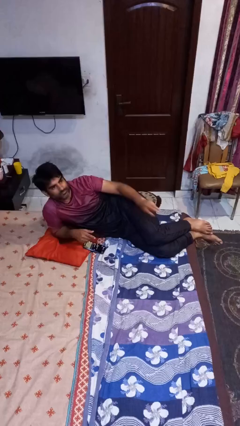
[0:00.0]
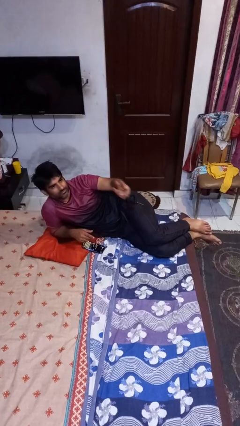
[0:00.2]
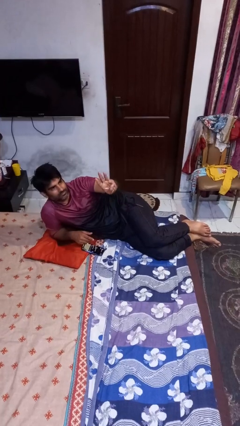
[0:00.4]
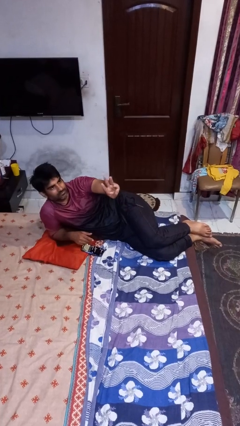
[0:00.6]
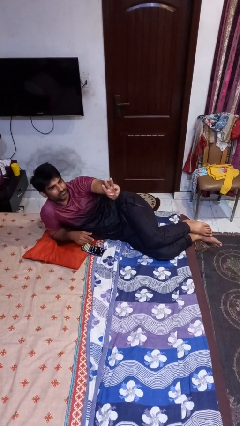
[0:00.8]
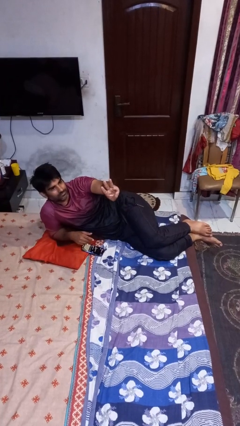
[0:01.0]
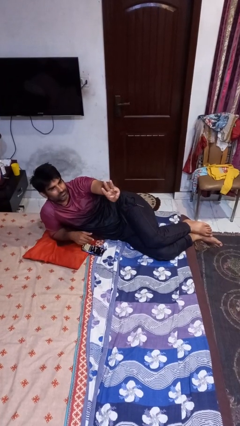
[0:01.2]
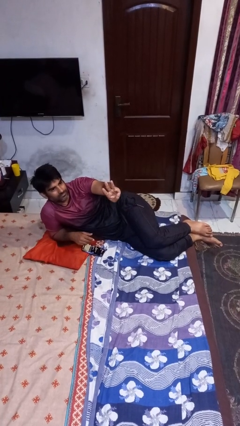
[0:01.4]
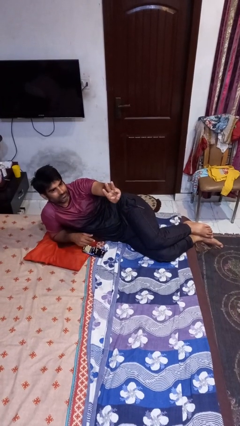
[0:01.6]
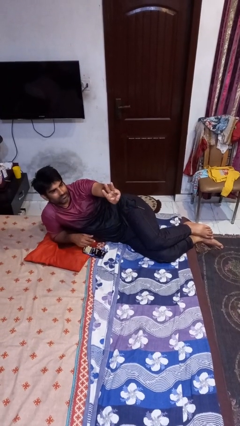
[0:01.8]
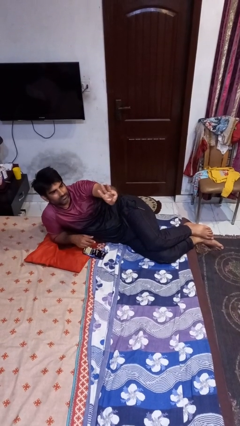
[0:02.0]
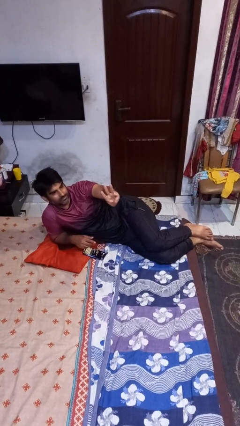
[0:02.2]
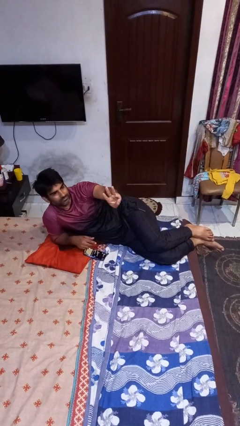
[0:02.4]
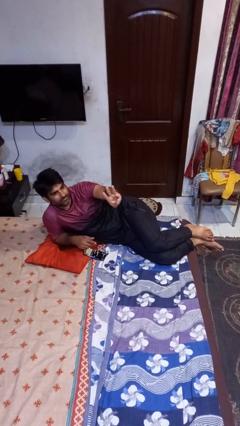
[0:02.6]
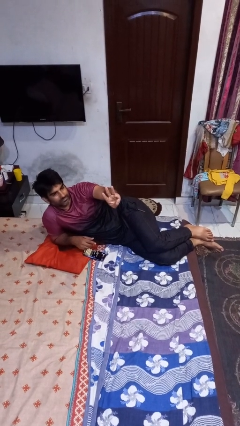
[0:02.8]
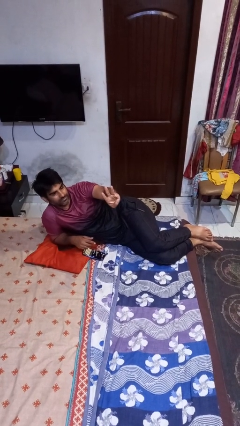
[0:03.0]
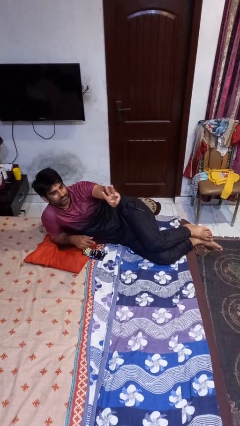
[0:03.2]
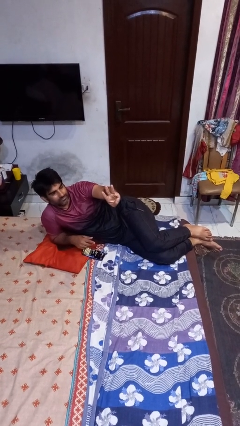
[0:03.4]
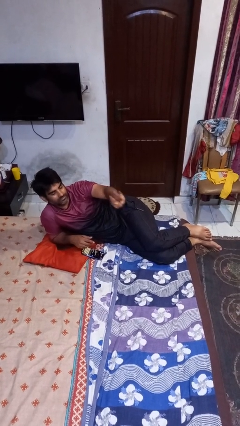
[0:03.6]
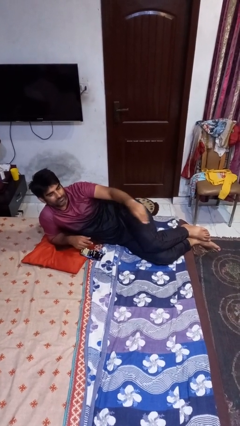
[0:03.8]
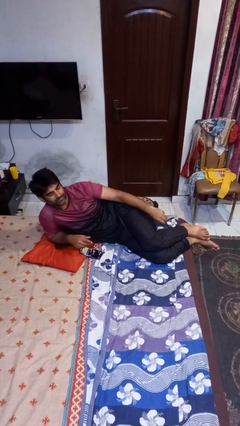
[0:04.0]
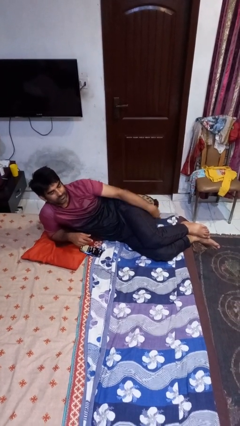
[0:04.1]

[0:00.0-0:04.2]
person gestures number three

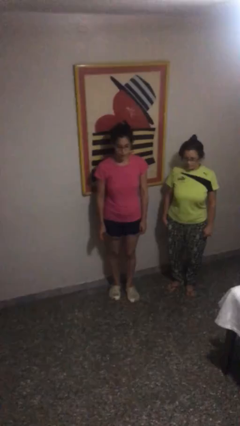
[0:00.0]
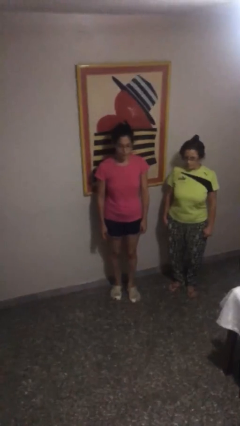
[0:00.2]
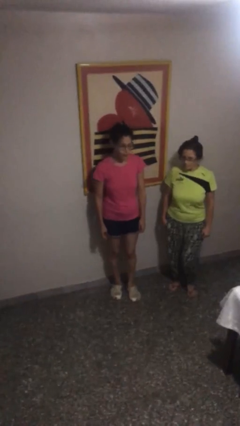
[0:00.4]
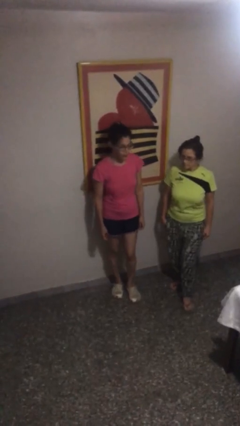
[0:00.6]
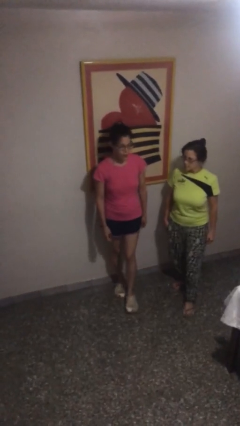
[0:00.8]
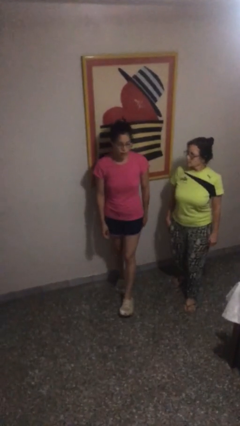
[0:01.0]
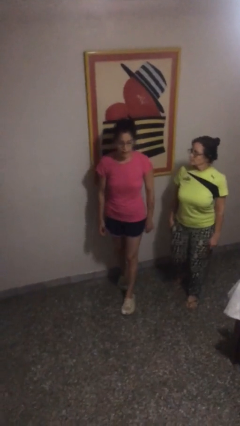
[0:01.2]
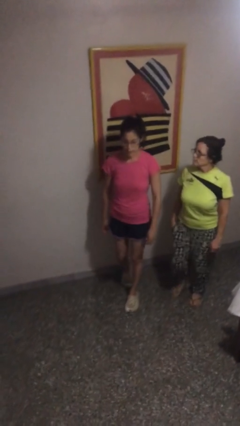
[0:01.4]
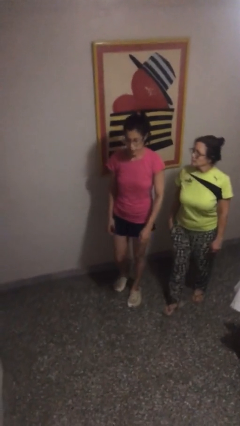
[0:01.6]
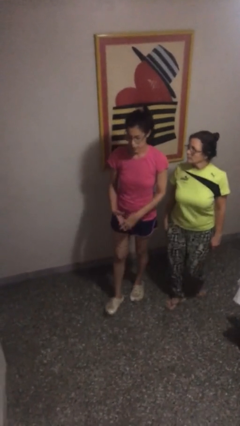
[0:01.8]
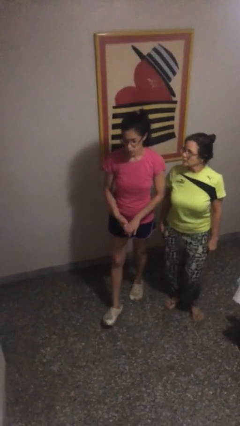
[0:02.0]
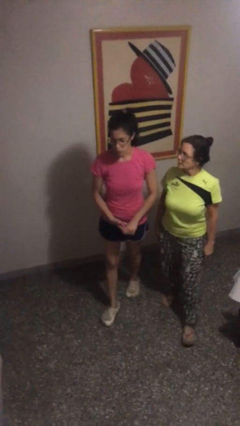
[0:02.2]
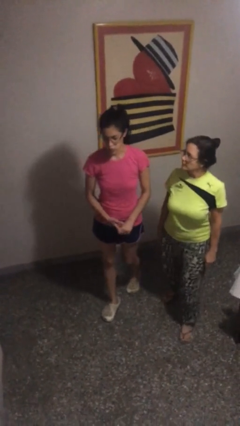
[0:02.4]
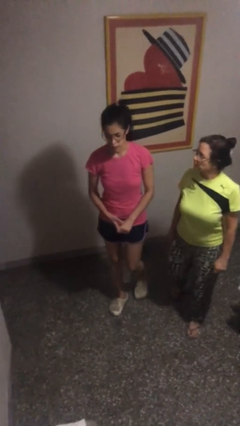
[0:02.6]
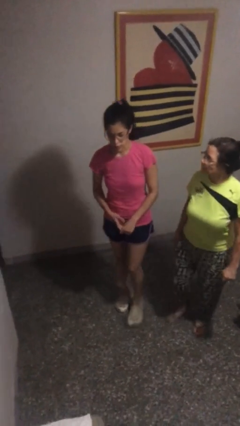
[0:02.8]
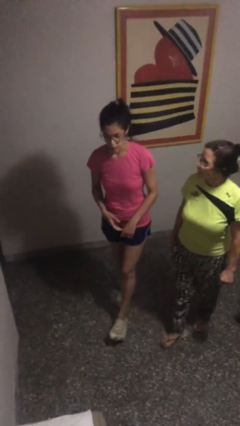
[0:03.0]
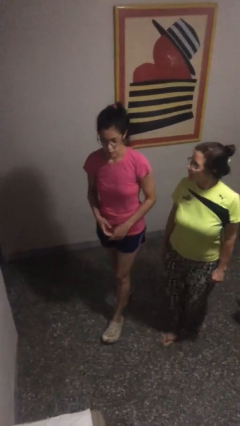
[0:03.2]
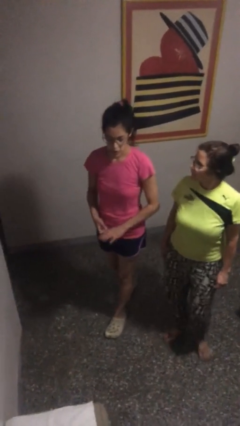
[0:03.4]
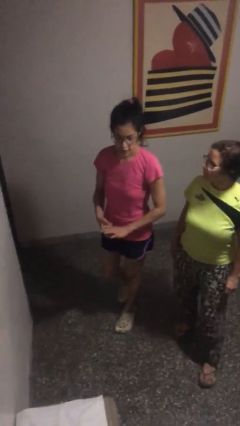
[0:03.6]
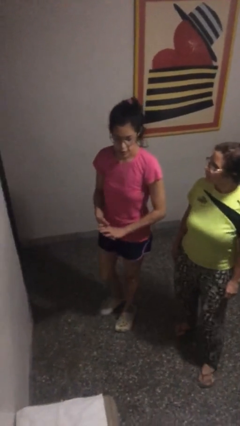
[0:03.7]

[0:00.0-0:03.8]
person talks to person

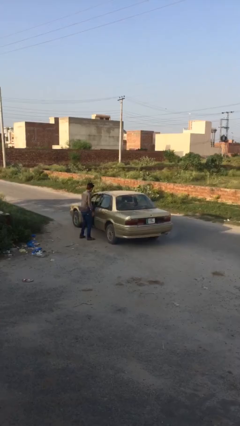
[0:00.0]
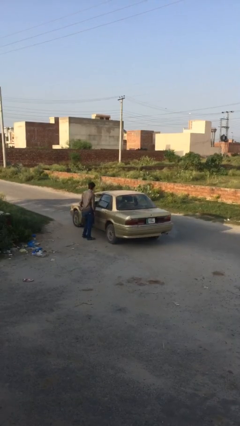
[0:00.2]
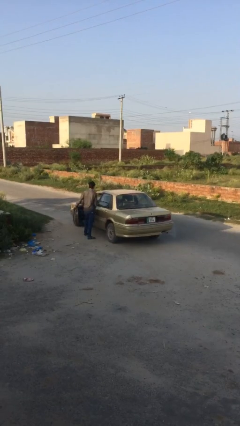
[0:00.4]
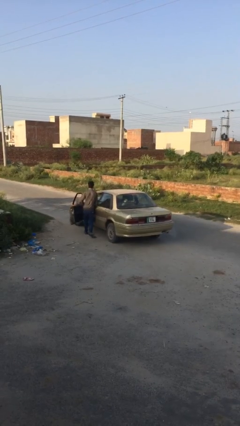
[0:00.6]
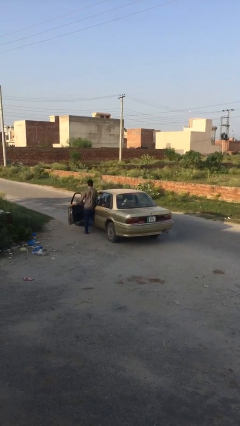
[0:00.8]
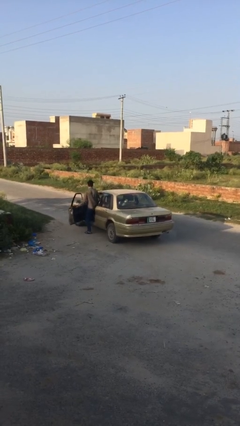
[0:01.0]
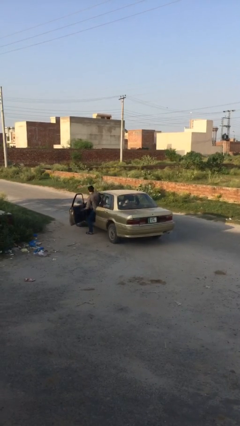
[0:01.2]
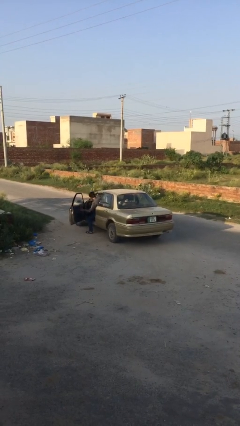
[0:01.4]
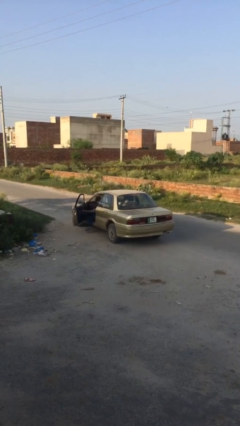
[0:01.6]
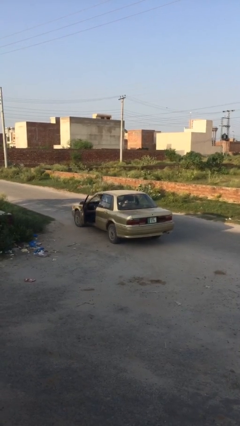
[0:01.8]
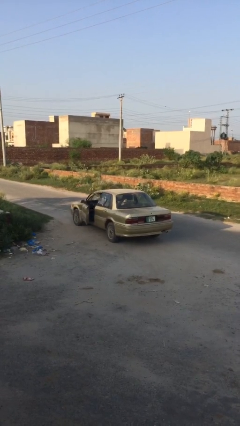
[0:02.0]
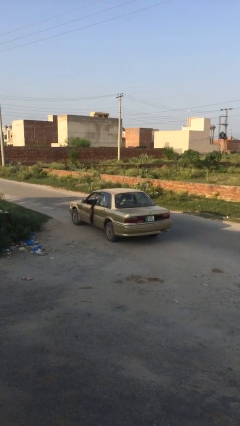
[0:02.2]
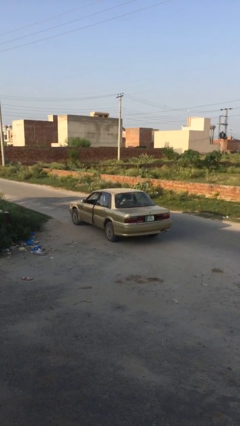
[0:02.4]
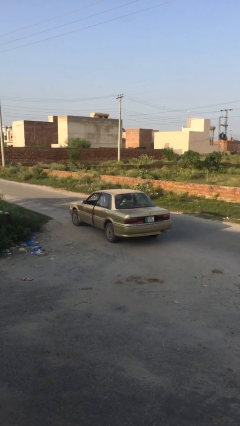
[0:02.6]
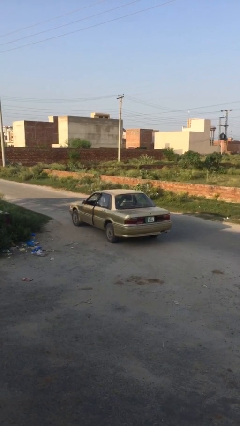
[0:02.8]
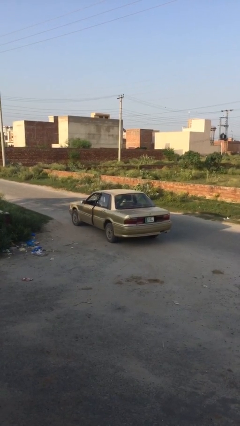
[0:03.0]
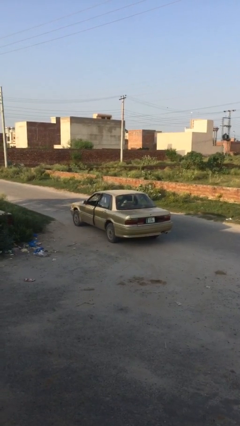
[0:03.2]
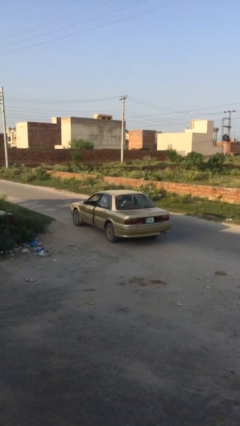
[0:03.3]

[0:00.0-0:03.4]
car picks up person

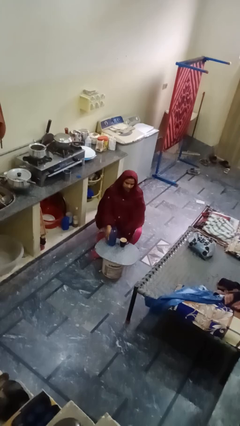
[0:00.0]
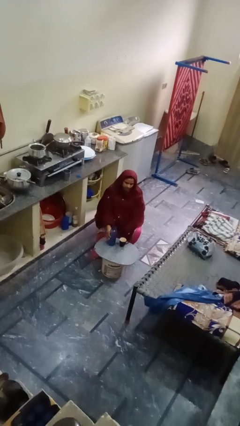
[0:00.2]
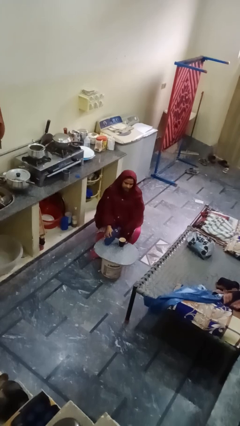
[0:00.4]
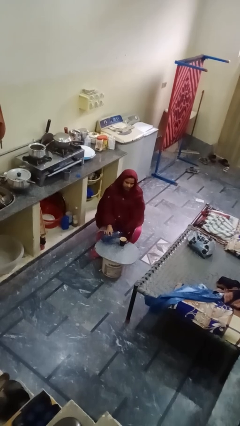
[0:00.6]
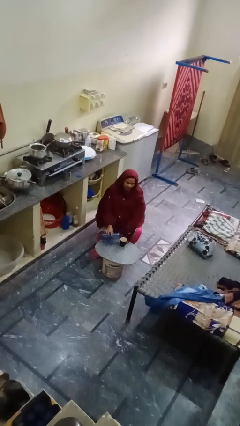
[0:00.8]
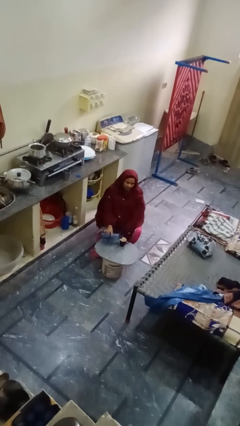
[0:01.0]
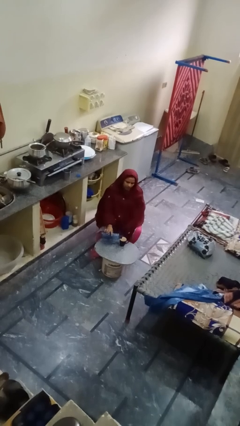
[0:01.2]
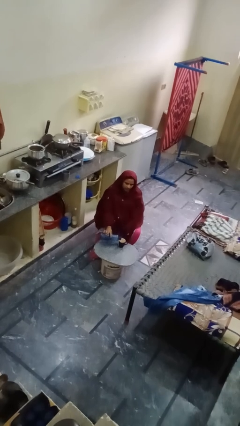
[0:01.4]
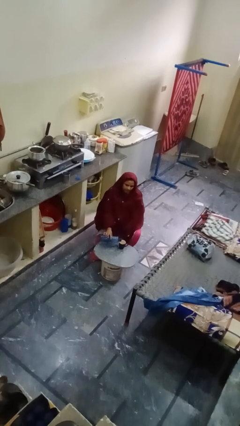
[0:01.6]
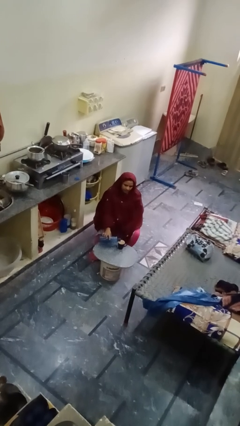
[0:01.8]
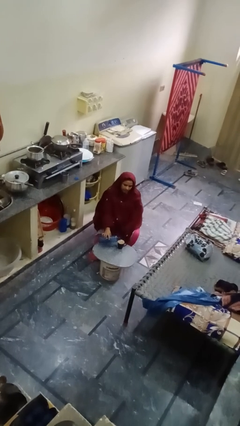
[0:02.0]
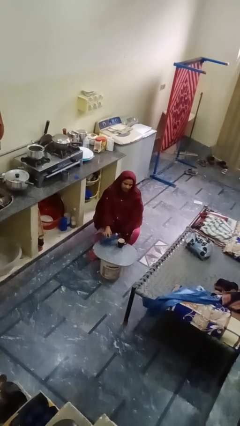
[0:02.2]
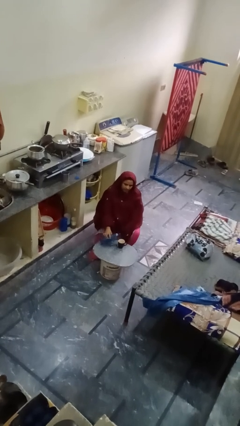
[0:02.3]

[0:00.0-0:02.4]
person pours liquid into cup

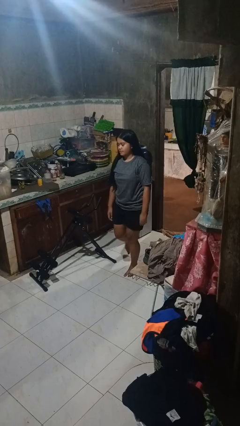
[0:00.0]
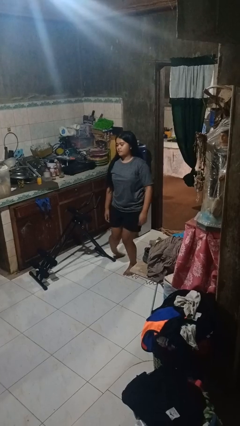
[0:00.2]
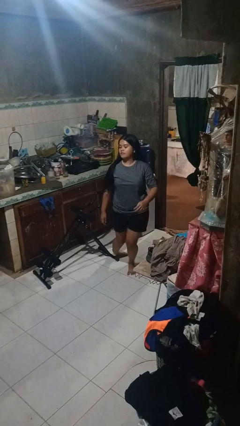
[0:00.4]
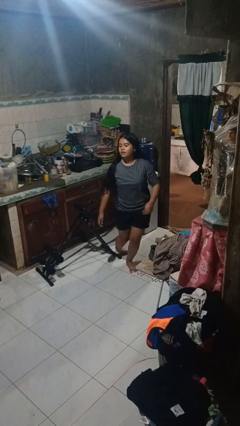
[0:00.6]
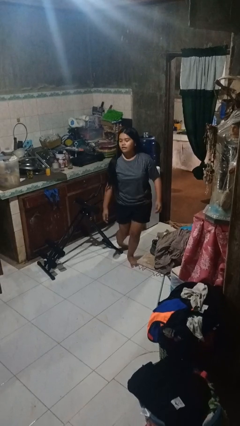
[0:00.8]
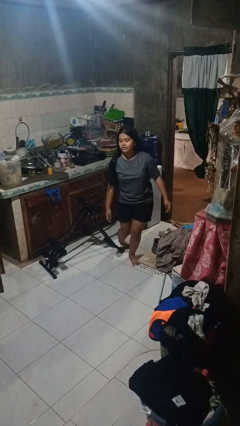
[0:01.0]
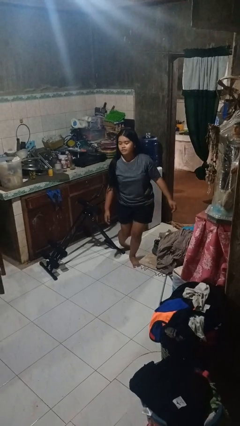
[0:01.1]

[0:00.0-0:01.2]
person trips on object on floor

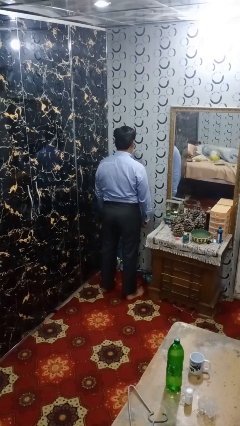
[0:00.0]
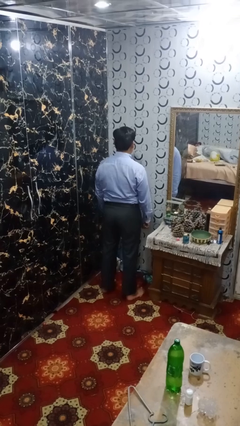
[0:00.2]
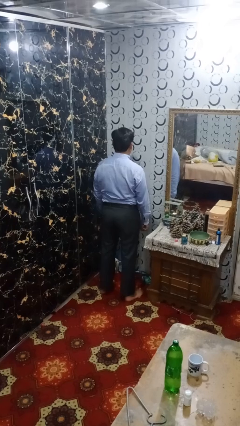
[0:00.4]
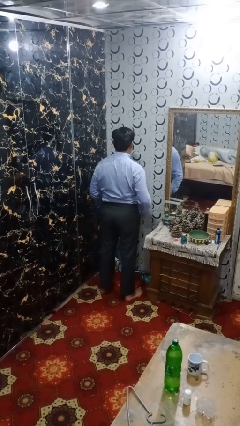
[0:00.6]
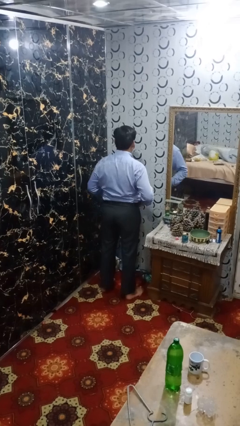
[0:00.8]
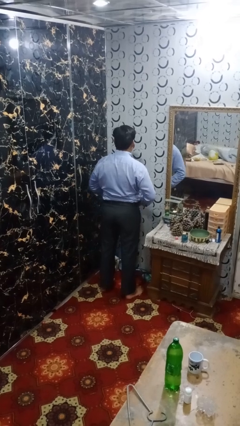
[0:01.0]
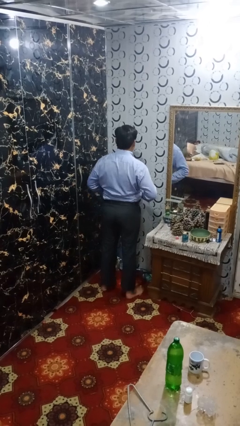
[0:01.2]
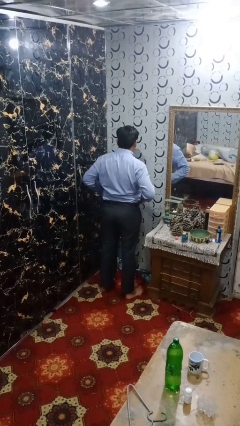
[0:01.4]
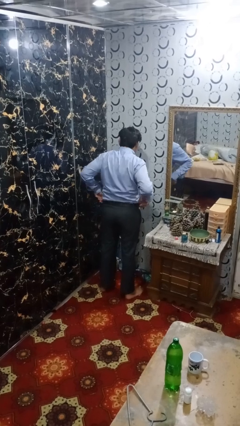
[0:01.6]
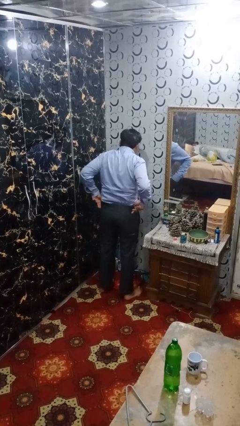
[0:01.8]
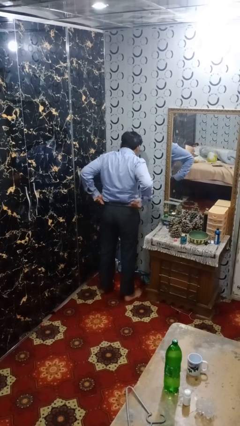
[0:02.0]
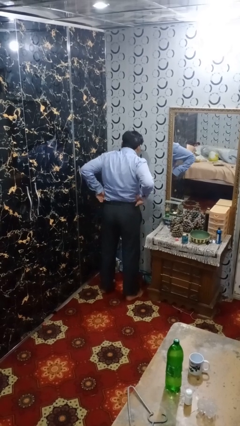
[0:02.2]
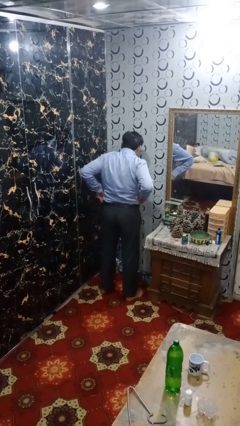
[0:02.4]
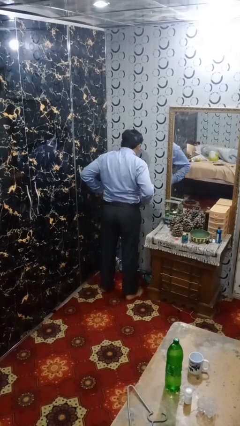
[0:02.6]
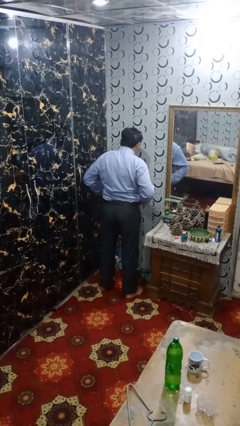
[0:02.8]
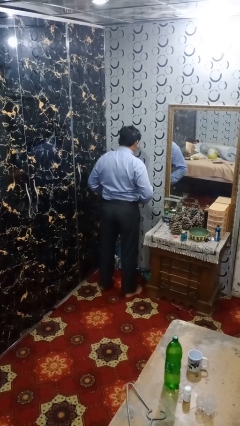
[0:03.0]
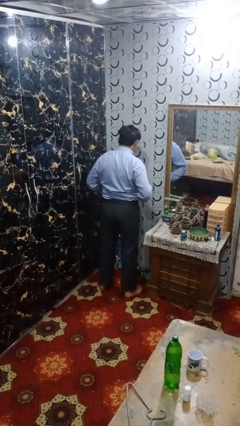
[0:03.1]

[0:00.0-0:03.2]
person hikes up pants
